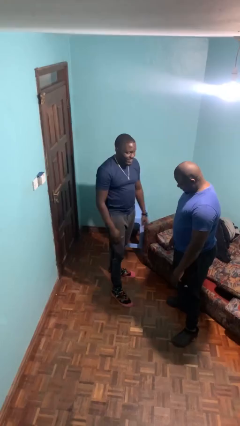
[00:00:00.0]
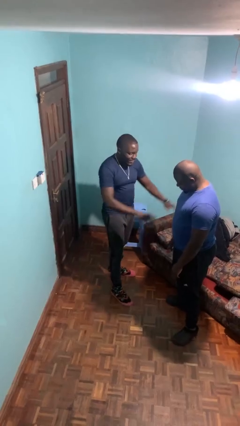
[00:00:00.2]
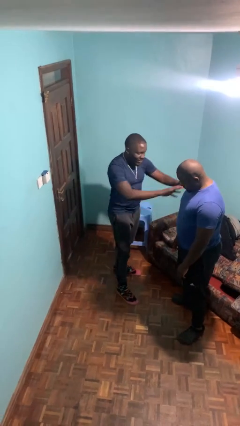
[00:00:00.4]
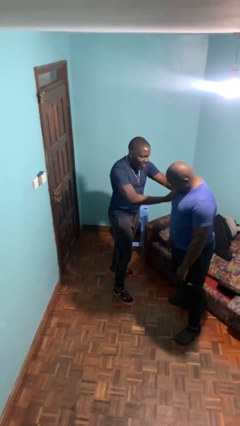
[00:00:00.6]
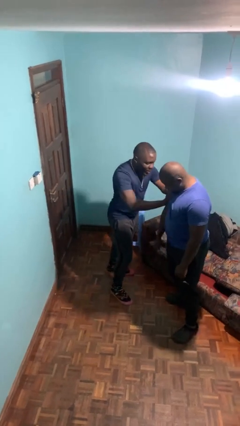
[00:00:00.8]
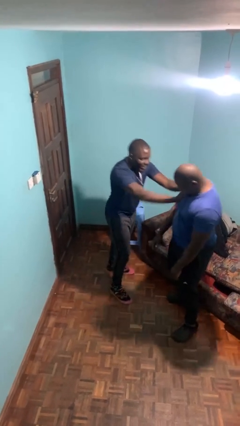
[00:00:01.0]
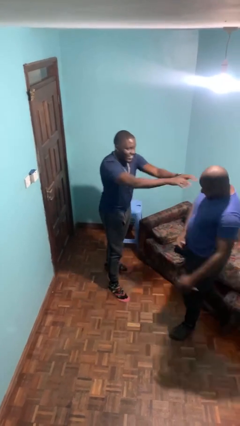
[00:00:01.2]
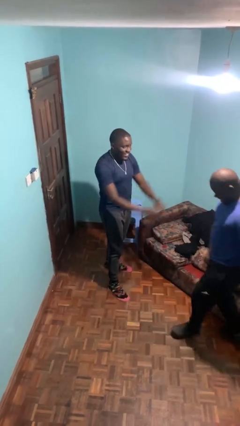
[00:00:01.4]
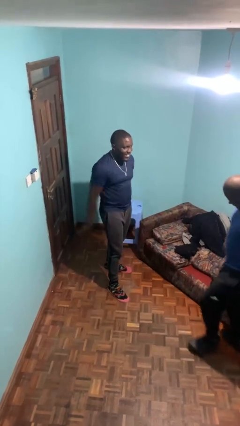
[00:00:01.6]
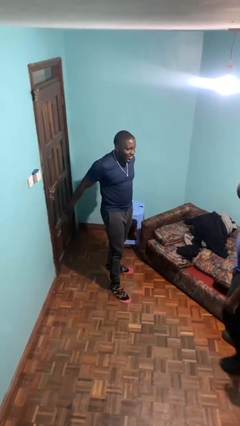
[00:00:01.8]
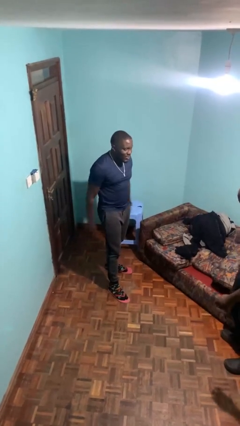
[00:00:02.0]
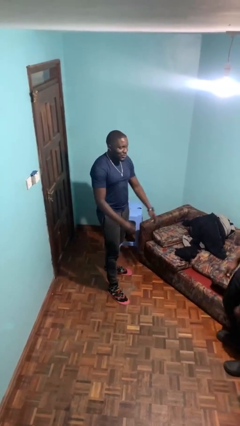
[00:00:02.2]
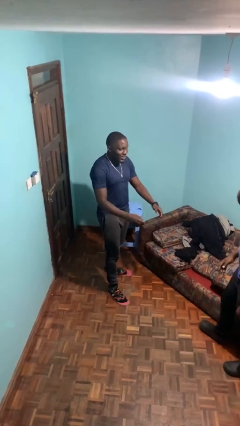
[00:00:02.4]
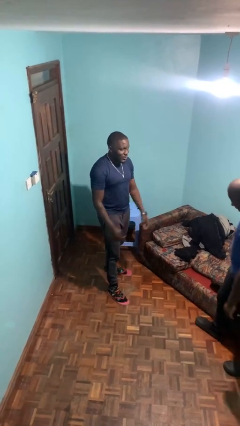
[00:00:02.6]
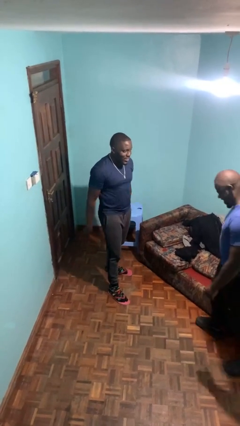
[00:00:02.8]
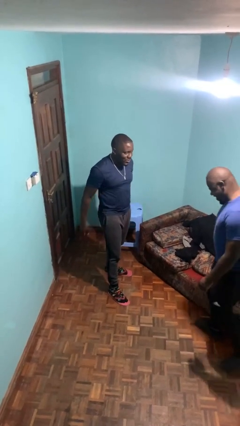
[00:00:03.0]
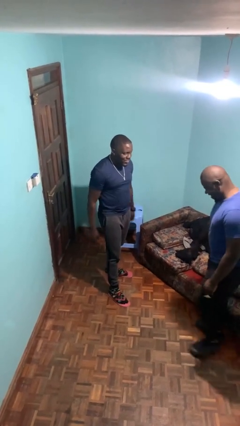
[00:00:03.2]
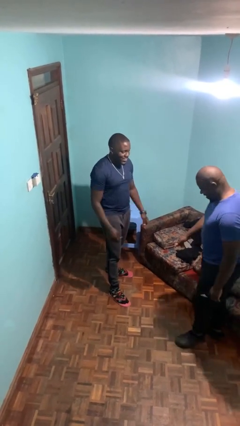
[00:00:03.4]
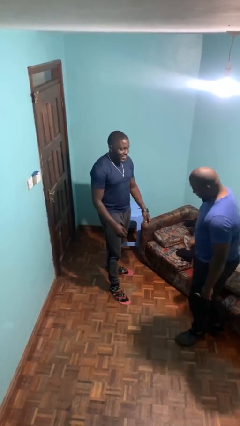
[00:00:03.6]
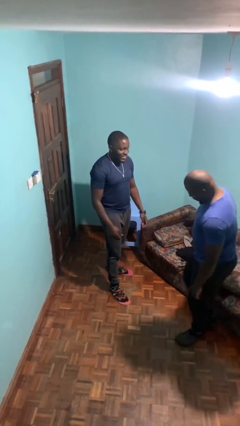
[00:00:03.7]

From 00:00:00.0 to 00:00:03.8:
person shoves person

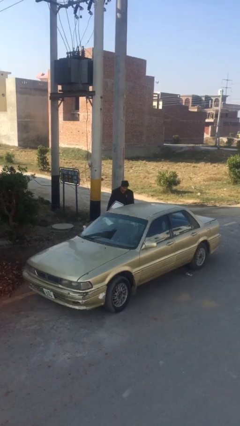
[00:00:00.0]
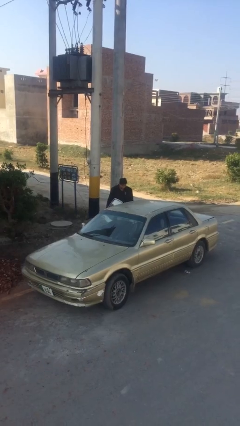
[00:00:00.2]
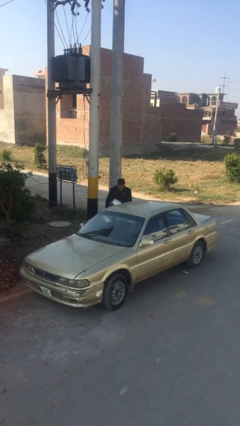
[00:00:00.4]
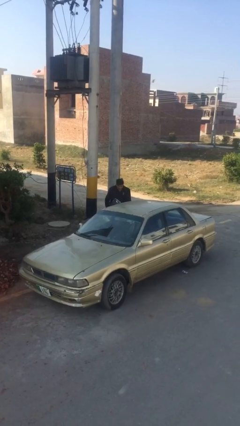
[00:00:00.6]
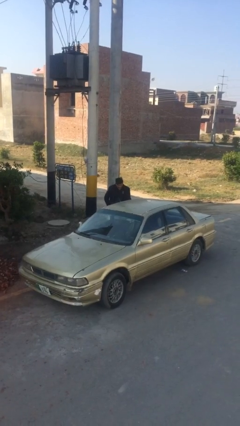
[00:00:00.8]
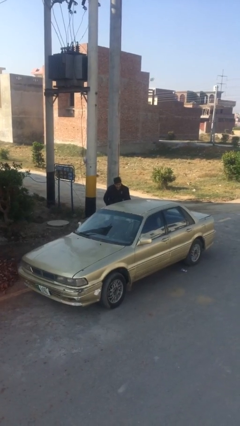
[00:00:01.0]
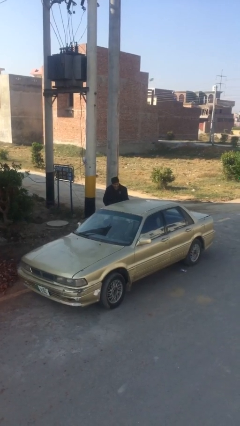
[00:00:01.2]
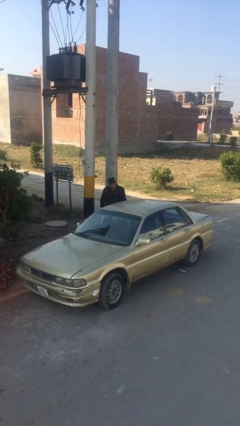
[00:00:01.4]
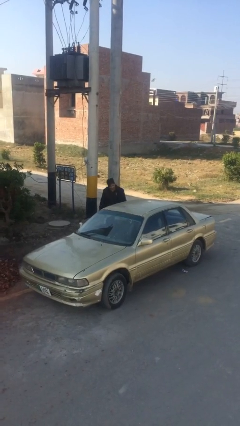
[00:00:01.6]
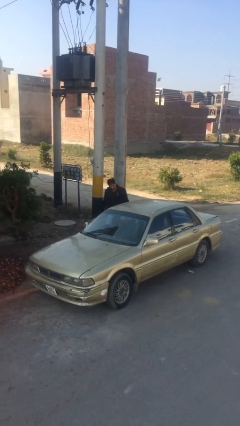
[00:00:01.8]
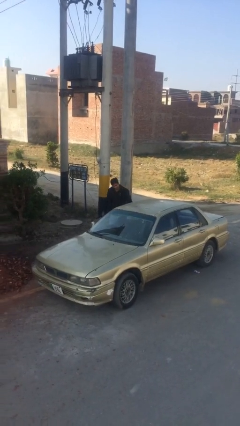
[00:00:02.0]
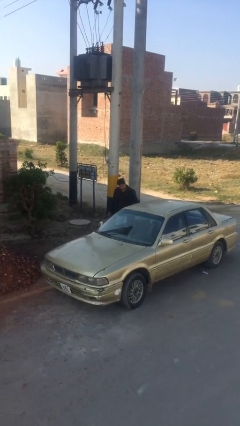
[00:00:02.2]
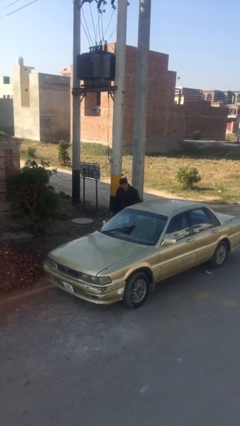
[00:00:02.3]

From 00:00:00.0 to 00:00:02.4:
person closes car door

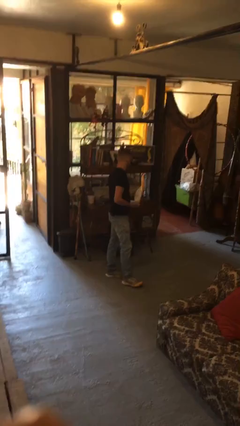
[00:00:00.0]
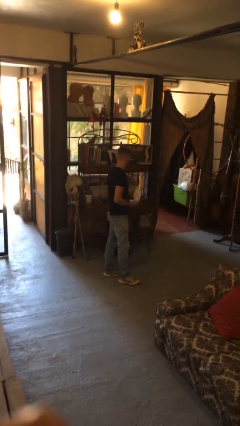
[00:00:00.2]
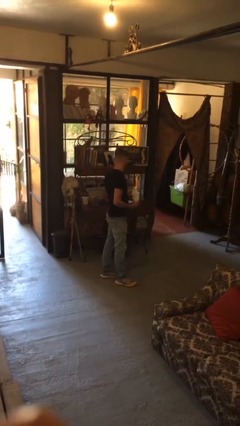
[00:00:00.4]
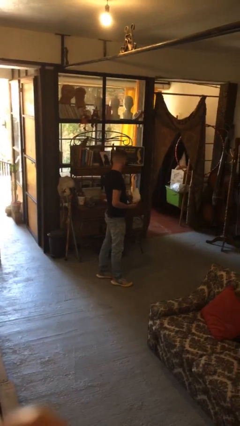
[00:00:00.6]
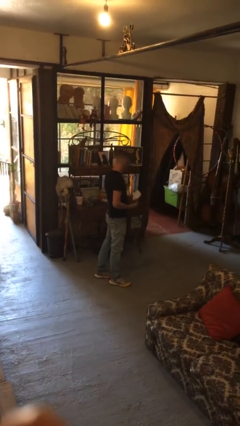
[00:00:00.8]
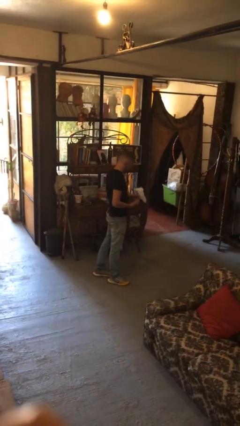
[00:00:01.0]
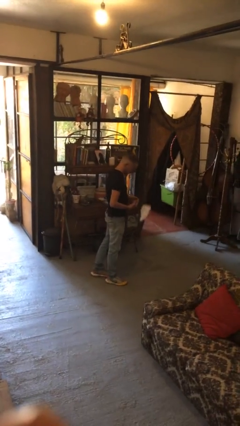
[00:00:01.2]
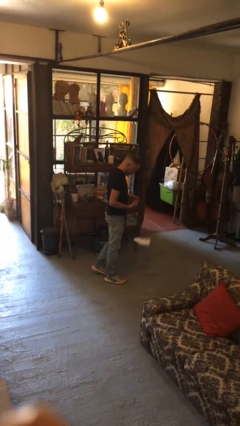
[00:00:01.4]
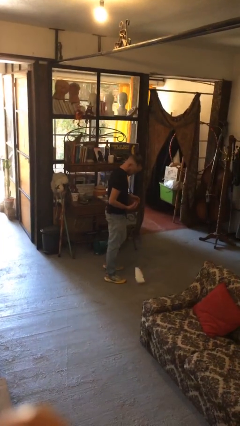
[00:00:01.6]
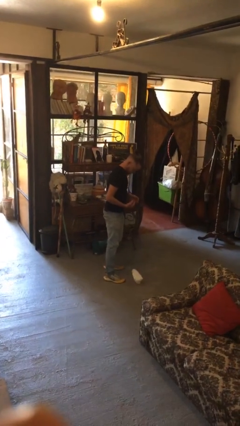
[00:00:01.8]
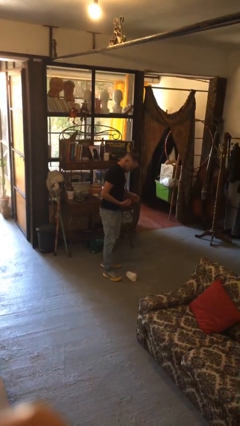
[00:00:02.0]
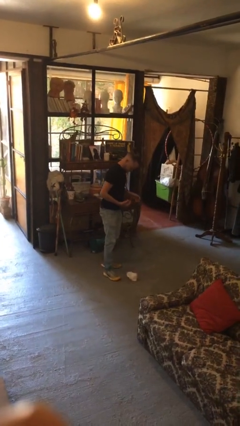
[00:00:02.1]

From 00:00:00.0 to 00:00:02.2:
person drops object

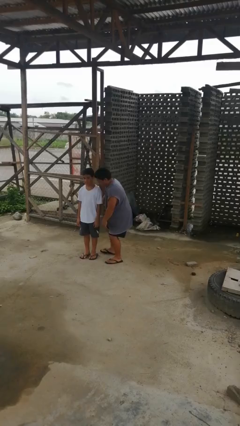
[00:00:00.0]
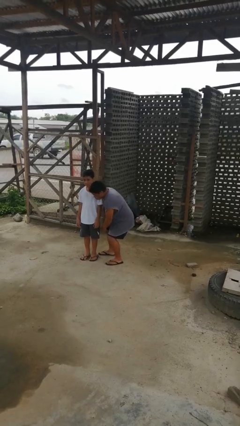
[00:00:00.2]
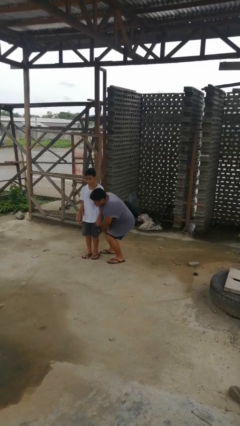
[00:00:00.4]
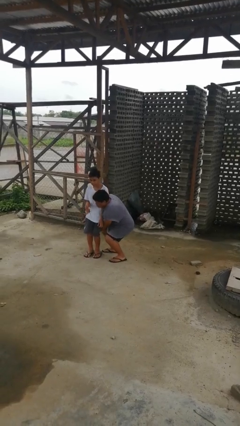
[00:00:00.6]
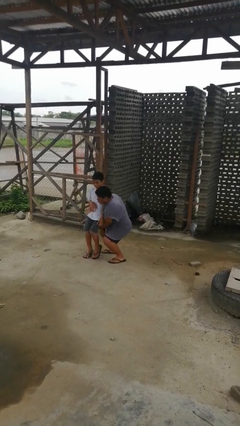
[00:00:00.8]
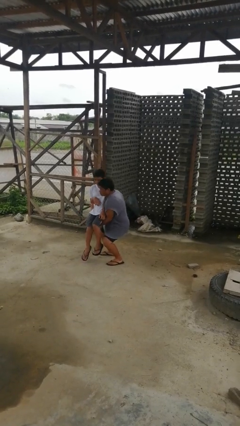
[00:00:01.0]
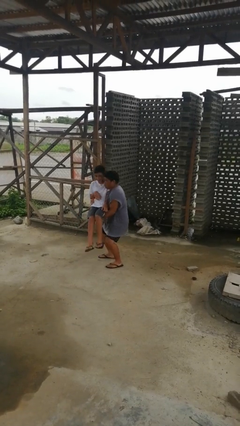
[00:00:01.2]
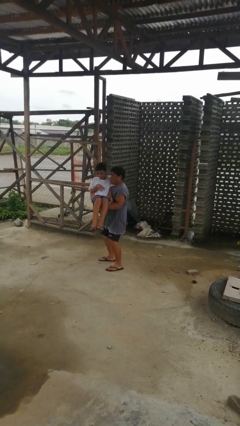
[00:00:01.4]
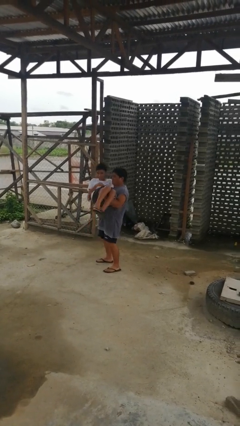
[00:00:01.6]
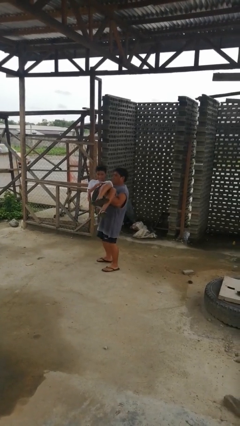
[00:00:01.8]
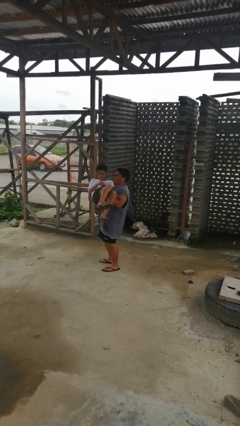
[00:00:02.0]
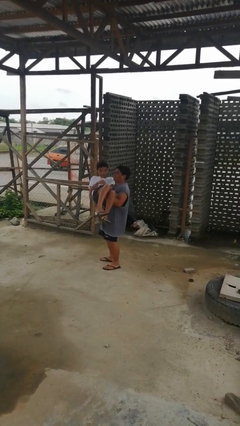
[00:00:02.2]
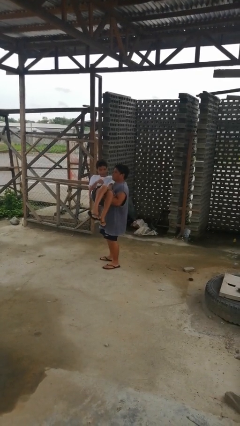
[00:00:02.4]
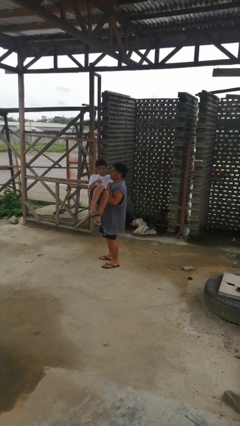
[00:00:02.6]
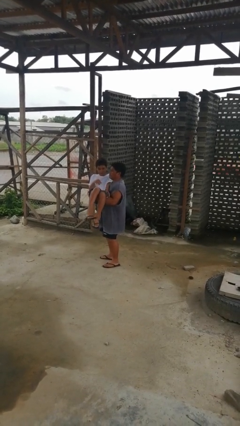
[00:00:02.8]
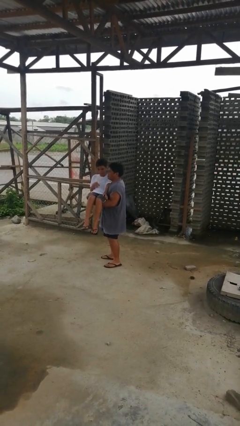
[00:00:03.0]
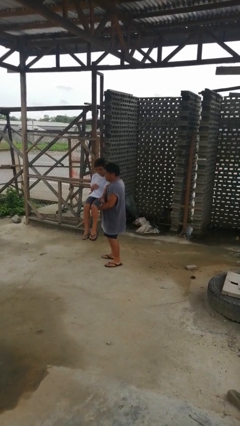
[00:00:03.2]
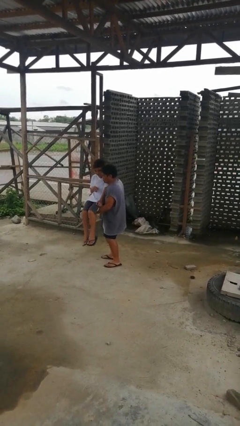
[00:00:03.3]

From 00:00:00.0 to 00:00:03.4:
person picks up person

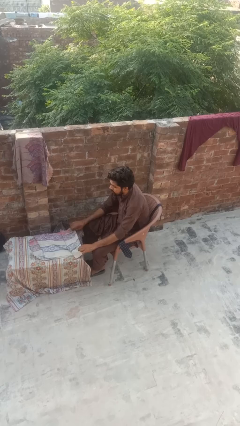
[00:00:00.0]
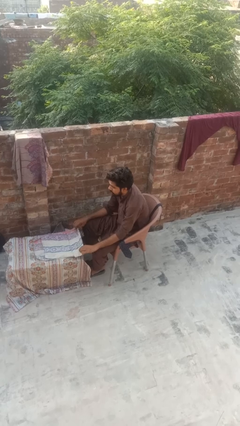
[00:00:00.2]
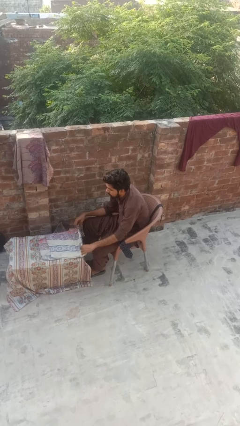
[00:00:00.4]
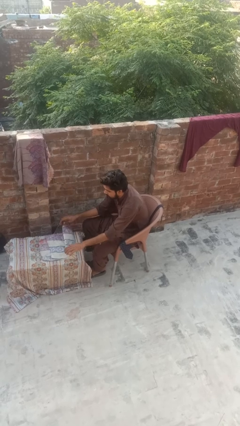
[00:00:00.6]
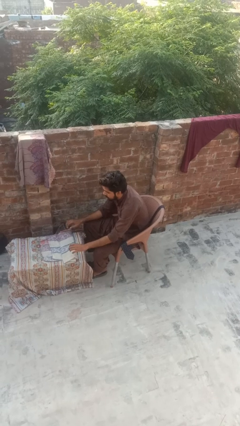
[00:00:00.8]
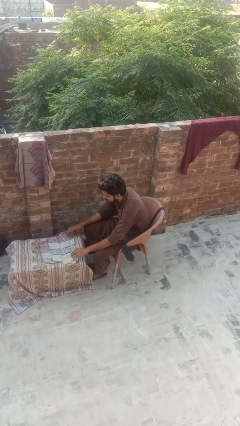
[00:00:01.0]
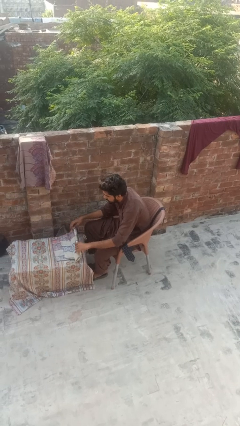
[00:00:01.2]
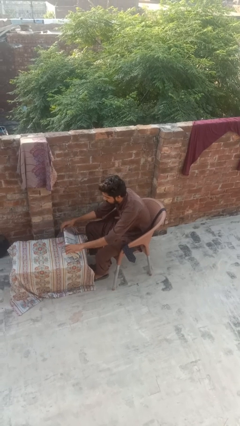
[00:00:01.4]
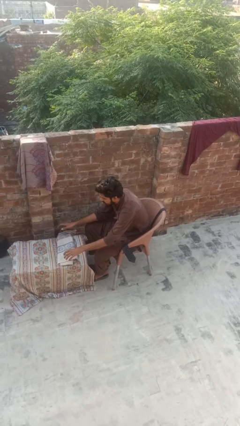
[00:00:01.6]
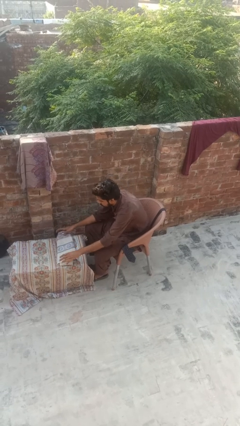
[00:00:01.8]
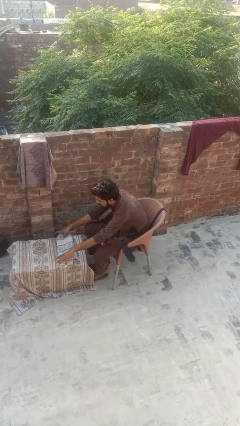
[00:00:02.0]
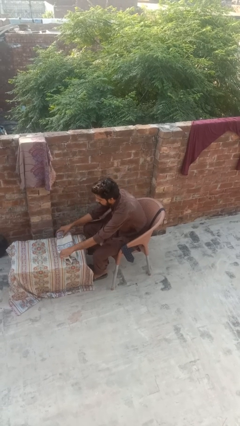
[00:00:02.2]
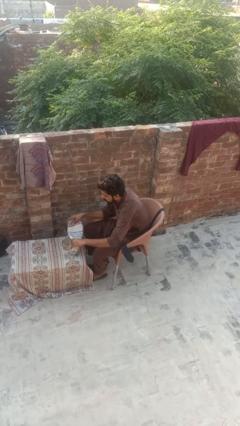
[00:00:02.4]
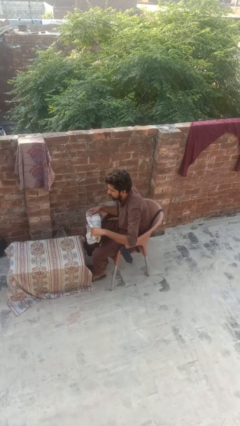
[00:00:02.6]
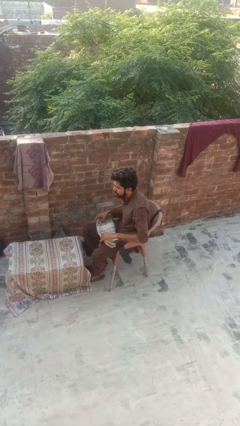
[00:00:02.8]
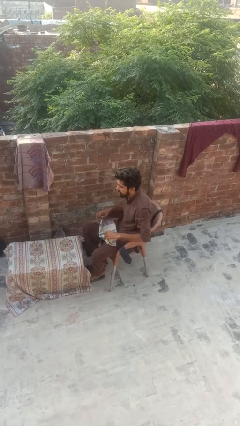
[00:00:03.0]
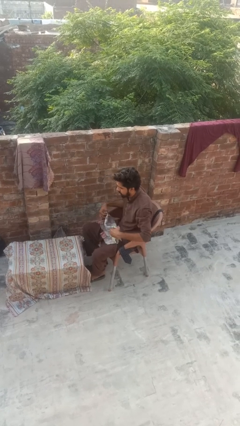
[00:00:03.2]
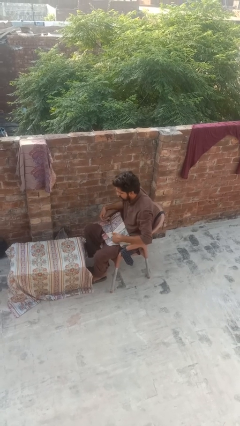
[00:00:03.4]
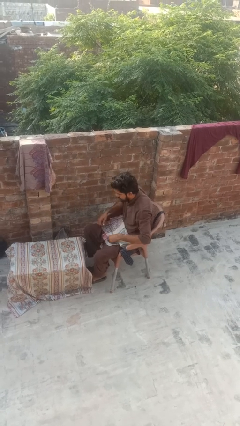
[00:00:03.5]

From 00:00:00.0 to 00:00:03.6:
person folds tablecloth

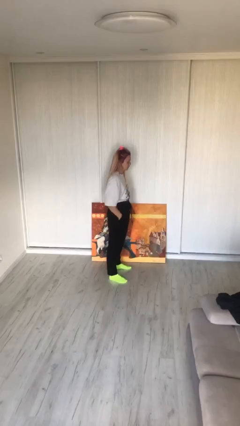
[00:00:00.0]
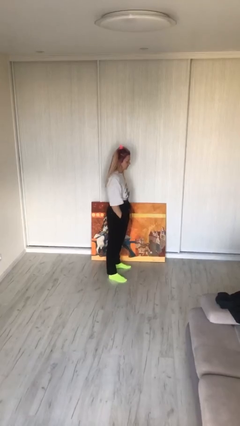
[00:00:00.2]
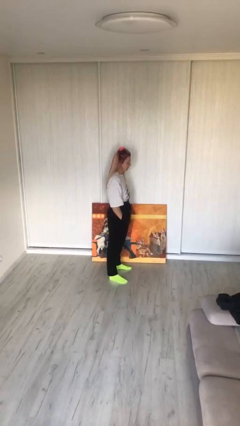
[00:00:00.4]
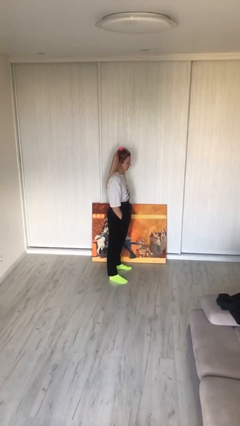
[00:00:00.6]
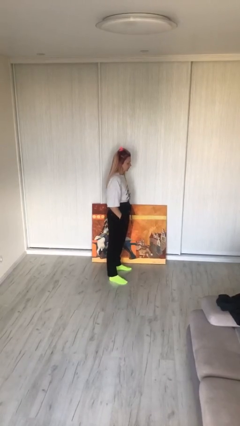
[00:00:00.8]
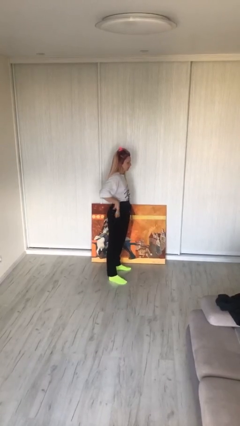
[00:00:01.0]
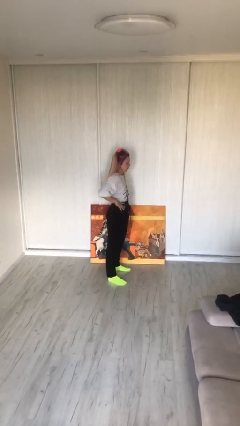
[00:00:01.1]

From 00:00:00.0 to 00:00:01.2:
person puts hands in back pockets

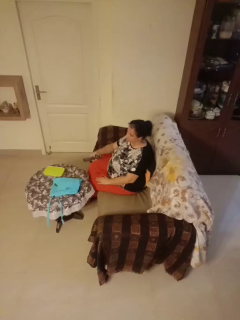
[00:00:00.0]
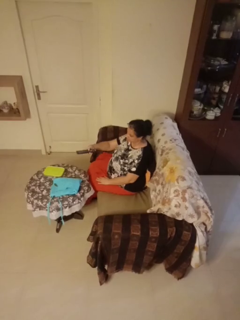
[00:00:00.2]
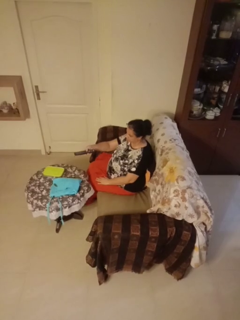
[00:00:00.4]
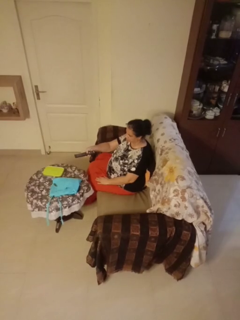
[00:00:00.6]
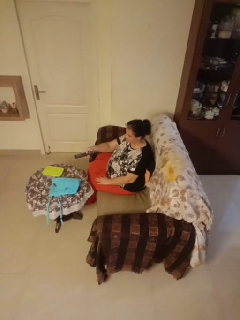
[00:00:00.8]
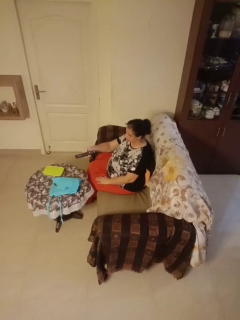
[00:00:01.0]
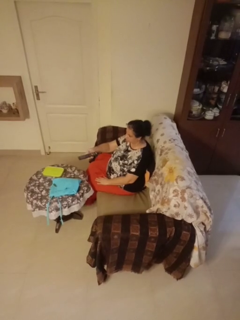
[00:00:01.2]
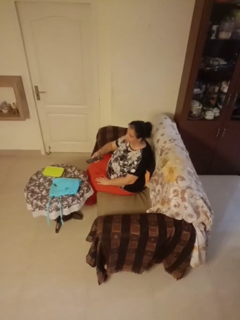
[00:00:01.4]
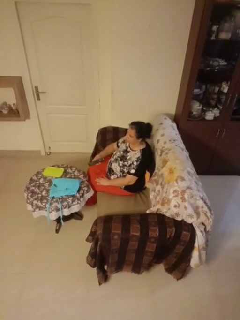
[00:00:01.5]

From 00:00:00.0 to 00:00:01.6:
person uses television remote
